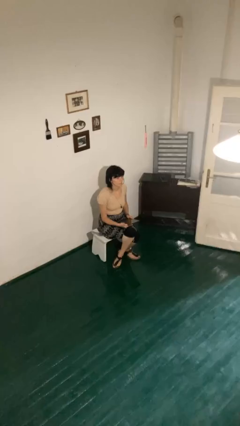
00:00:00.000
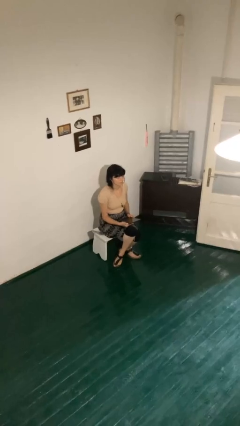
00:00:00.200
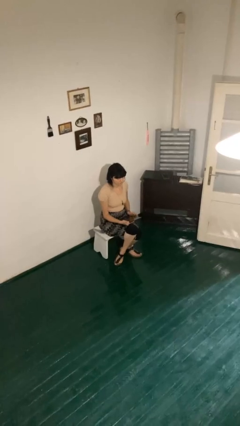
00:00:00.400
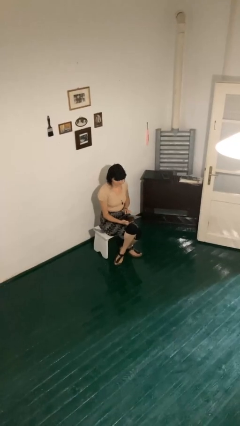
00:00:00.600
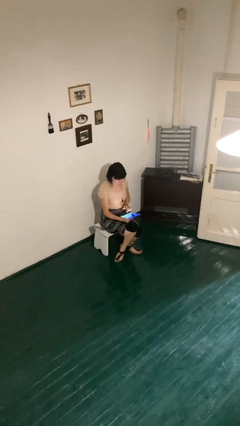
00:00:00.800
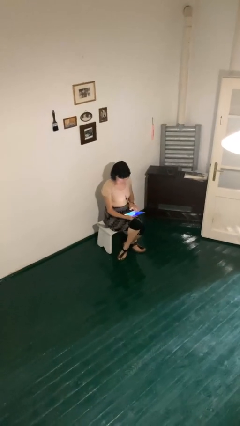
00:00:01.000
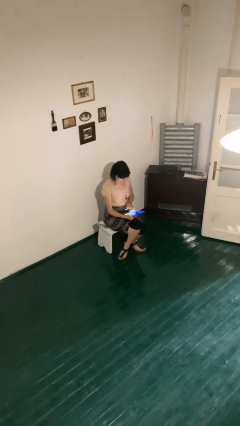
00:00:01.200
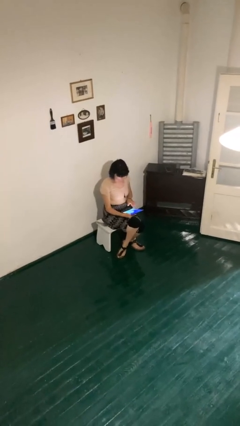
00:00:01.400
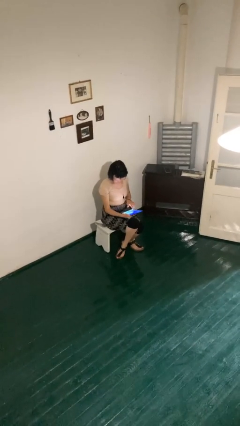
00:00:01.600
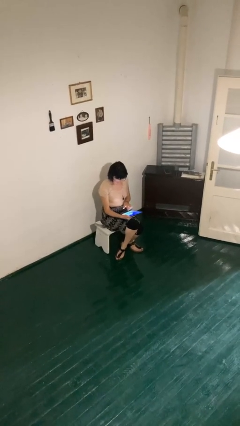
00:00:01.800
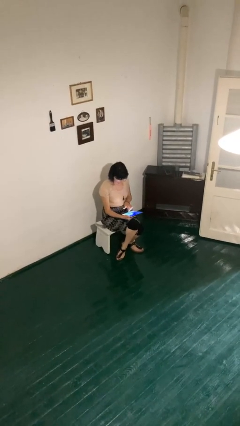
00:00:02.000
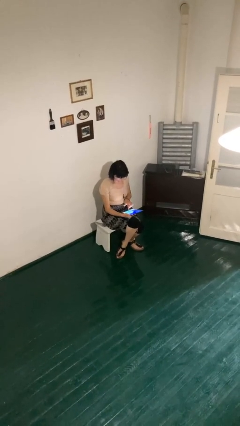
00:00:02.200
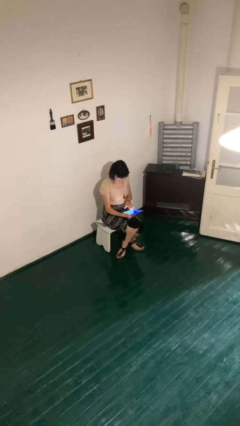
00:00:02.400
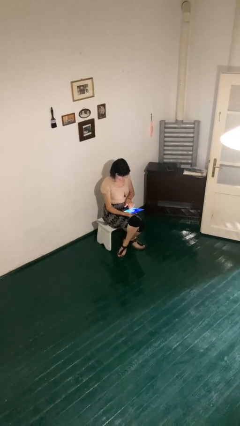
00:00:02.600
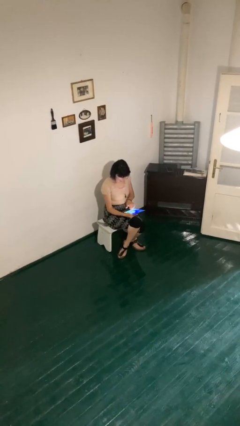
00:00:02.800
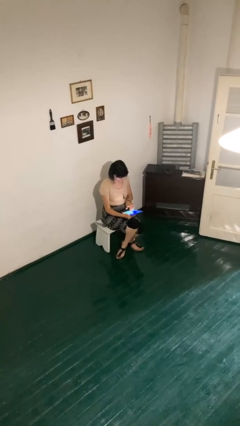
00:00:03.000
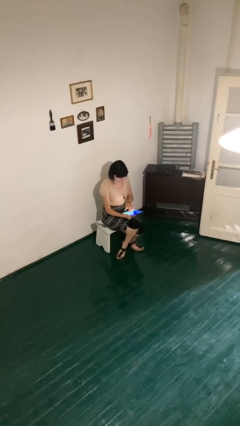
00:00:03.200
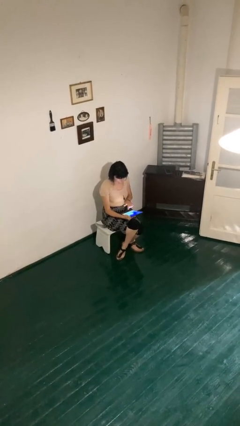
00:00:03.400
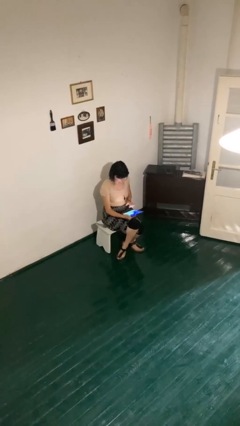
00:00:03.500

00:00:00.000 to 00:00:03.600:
person interacts with tablet

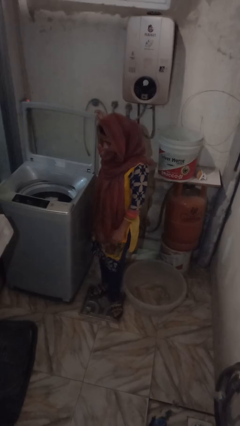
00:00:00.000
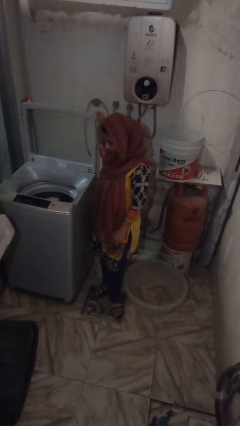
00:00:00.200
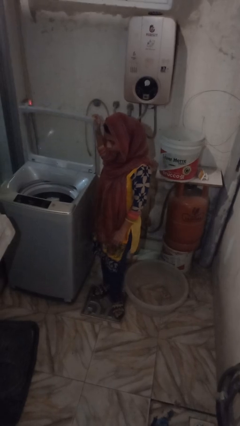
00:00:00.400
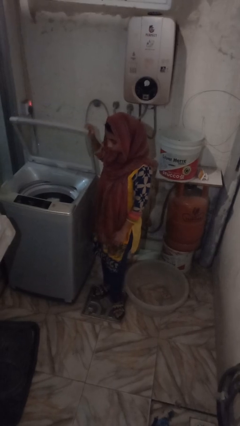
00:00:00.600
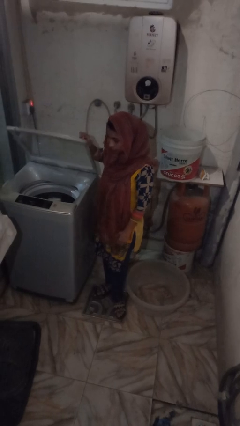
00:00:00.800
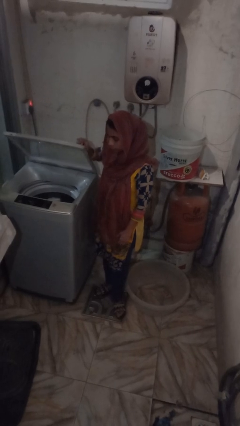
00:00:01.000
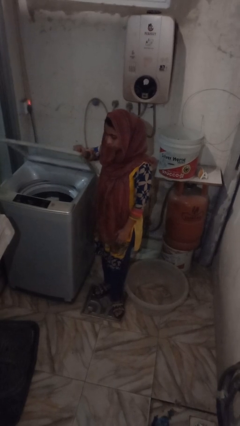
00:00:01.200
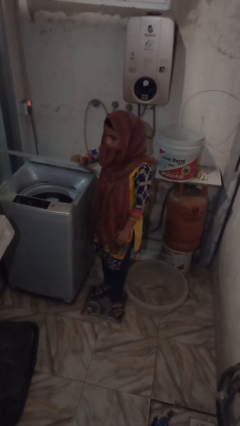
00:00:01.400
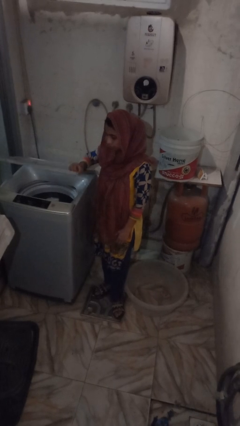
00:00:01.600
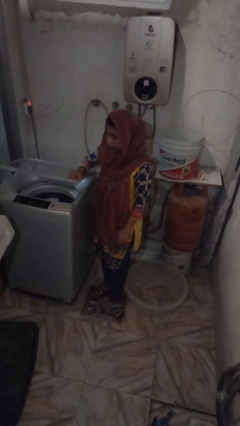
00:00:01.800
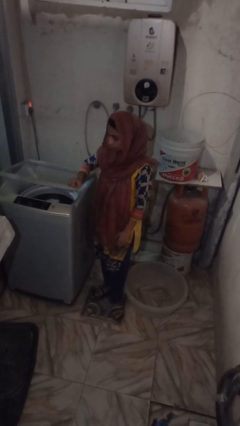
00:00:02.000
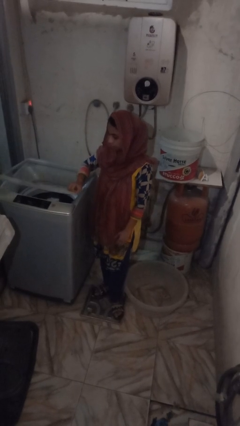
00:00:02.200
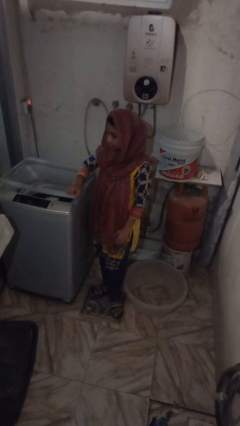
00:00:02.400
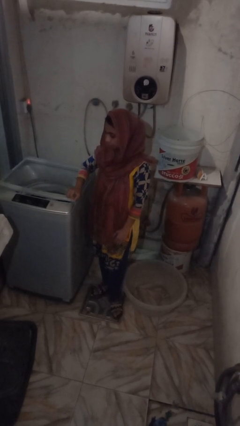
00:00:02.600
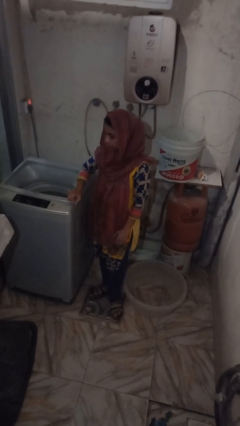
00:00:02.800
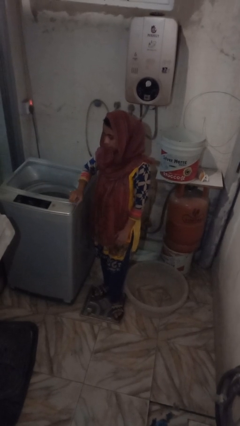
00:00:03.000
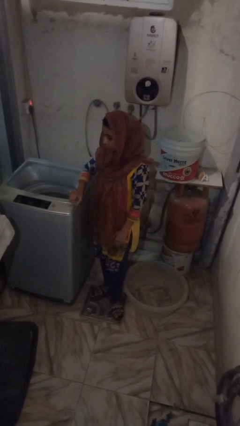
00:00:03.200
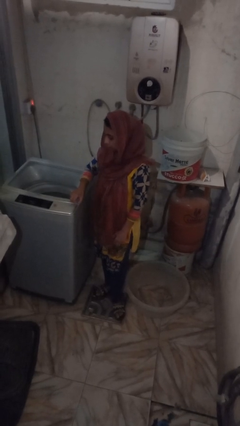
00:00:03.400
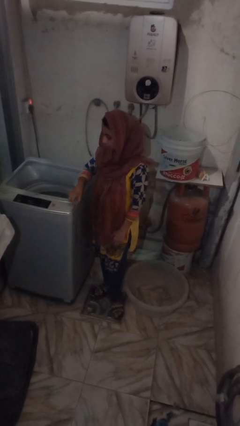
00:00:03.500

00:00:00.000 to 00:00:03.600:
person closes clothes washer

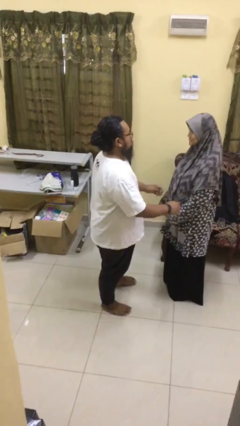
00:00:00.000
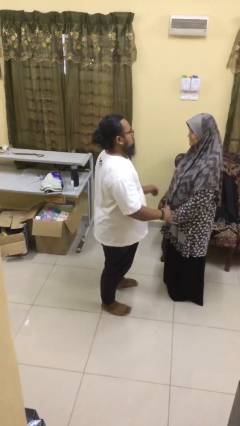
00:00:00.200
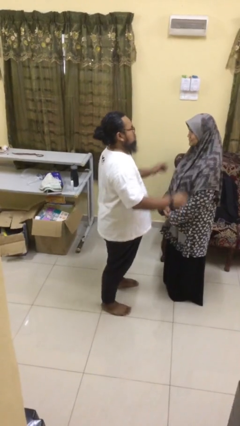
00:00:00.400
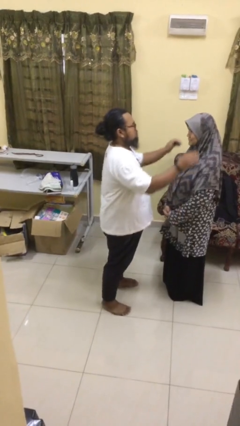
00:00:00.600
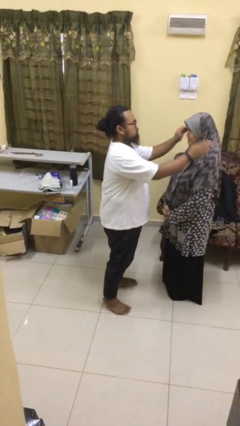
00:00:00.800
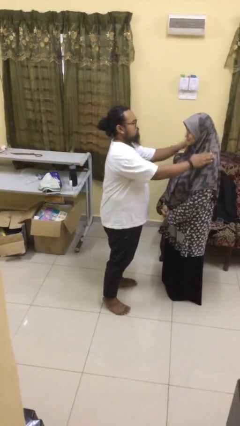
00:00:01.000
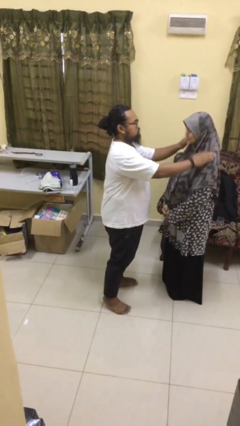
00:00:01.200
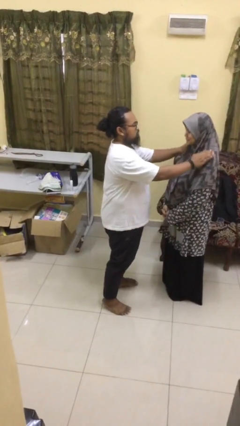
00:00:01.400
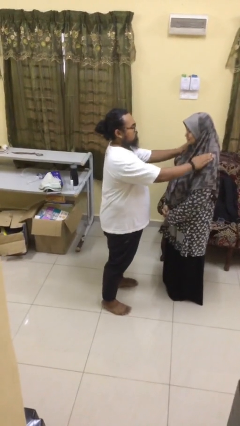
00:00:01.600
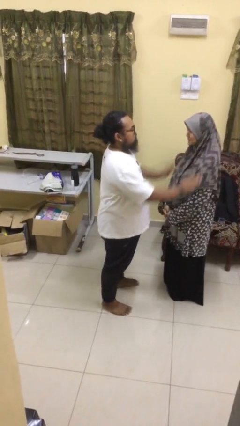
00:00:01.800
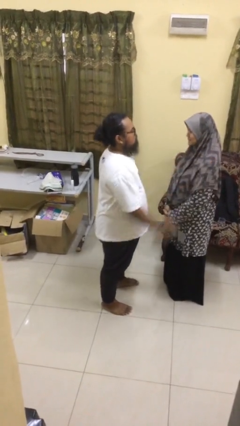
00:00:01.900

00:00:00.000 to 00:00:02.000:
person pounds shoulders of person

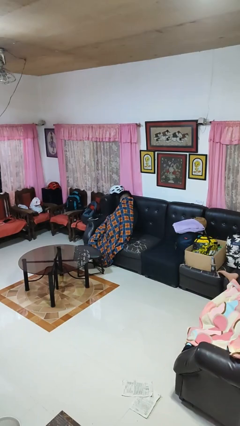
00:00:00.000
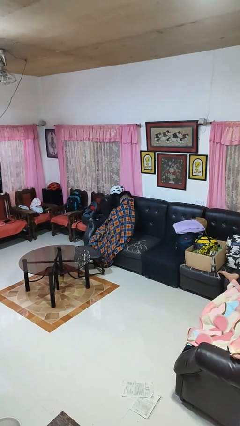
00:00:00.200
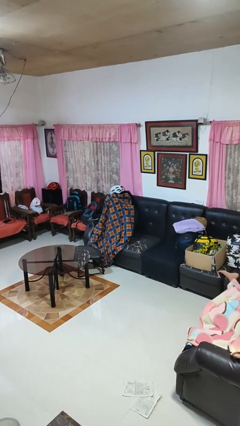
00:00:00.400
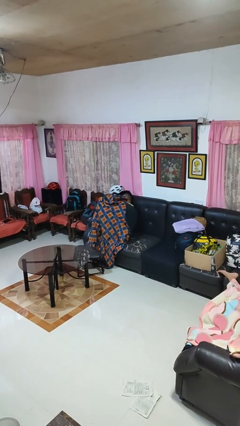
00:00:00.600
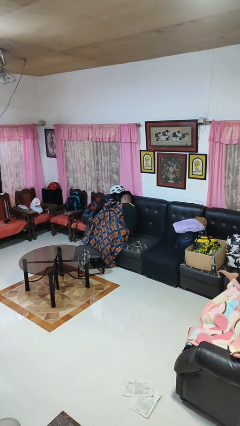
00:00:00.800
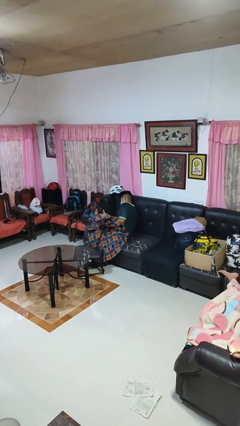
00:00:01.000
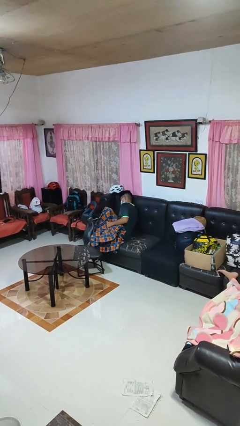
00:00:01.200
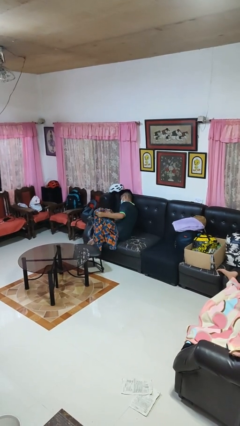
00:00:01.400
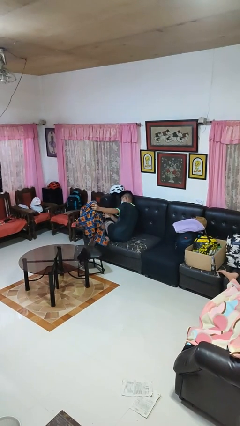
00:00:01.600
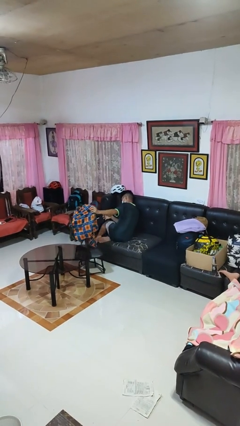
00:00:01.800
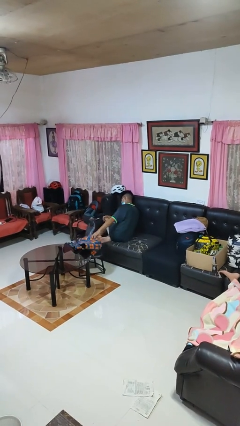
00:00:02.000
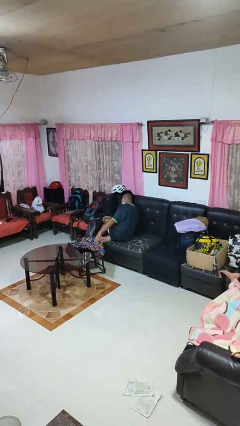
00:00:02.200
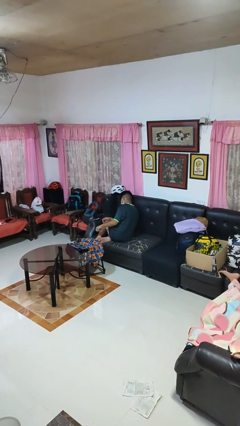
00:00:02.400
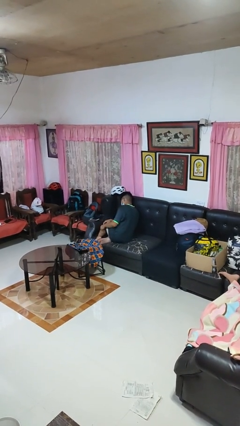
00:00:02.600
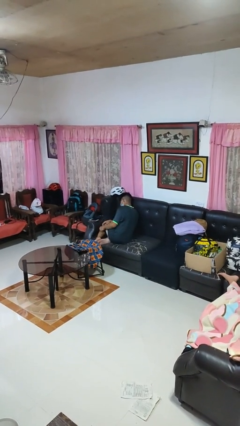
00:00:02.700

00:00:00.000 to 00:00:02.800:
person uncovers with blanket

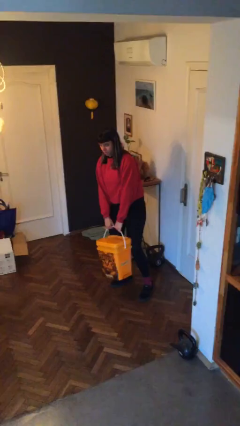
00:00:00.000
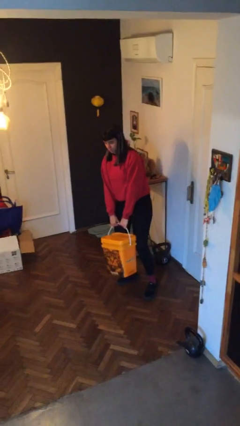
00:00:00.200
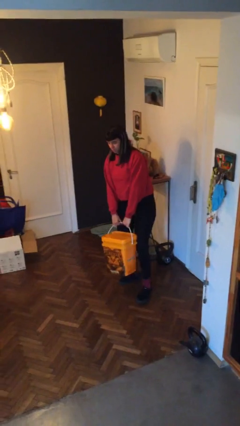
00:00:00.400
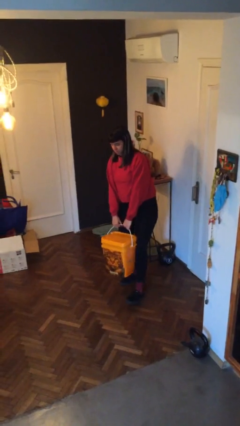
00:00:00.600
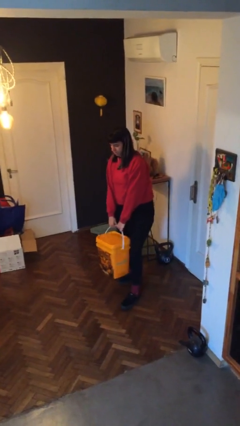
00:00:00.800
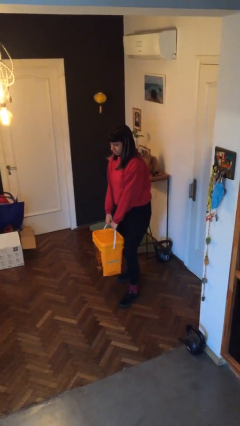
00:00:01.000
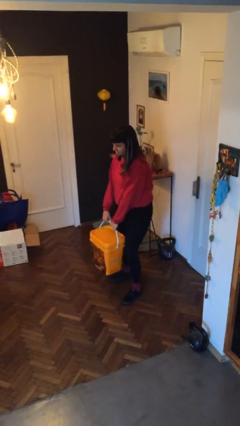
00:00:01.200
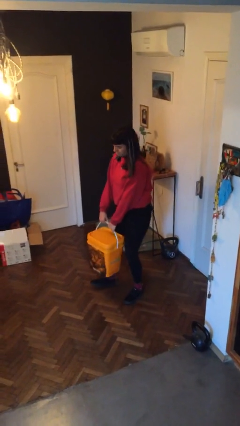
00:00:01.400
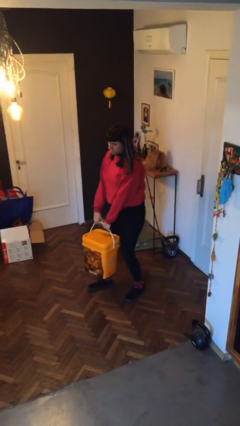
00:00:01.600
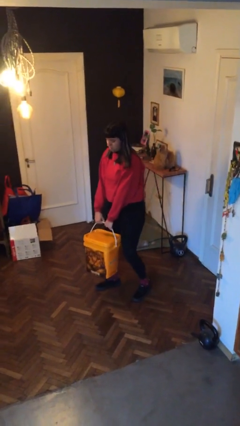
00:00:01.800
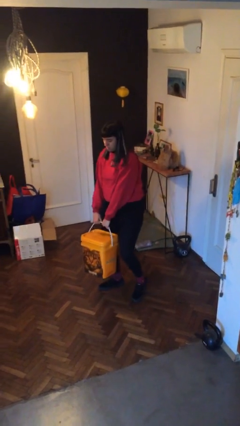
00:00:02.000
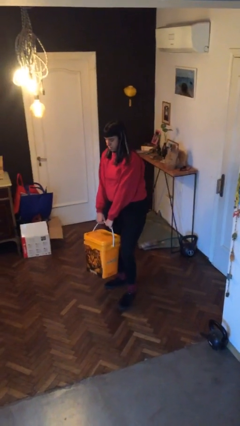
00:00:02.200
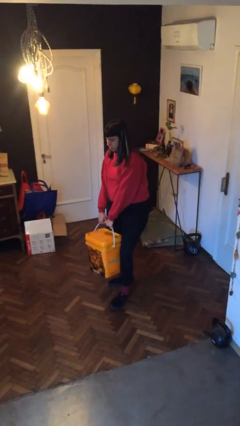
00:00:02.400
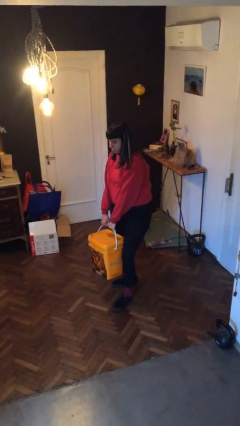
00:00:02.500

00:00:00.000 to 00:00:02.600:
person carries heavy object

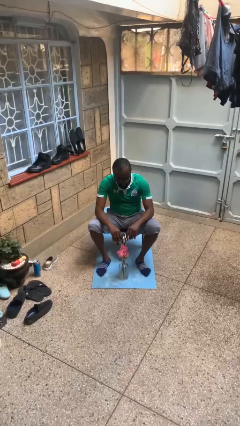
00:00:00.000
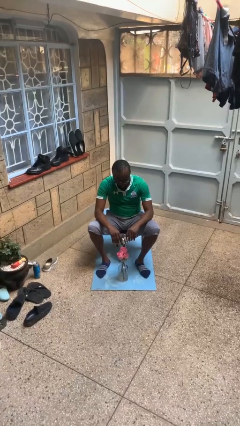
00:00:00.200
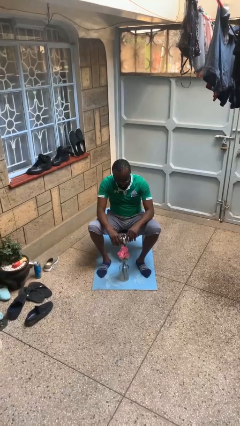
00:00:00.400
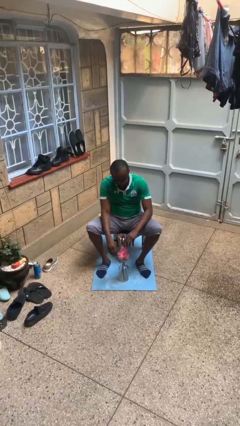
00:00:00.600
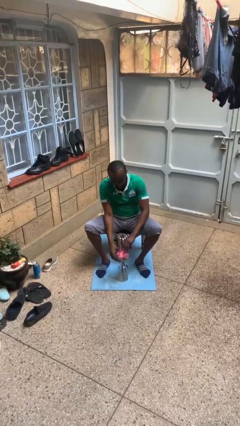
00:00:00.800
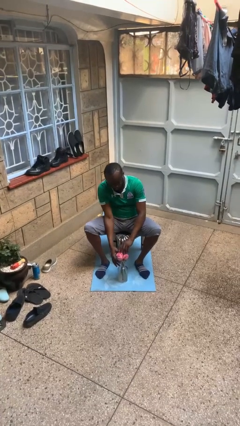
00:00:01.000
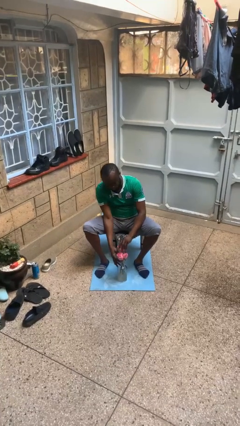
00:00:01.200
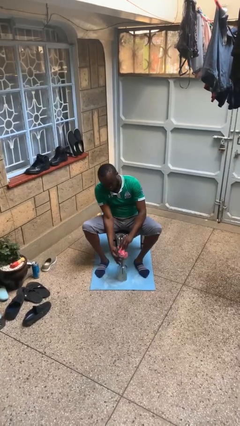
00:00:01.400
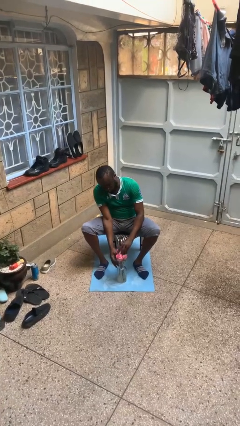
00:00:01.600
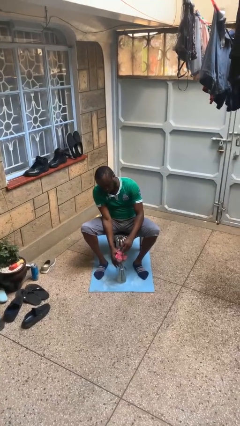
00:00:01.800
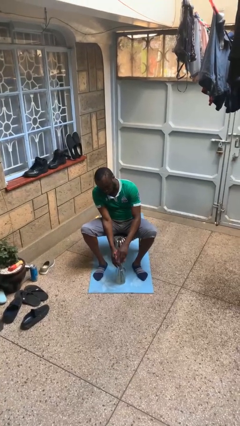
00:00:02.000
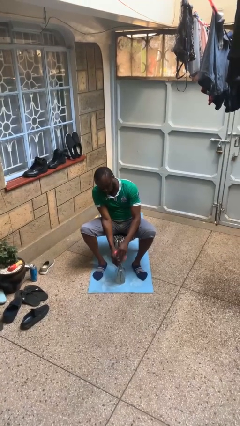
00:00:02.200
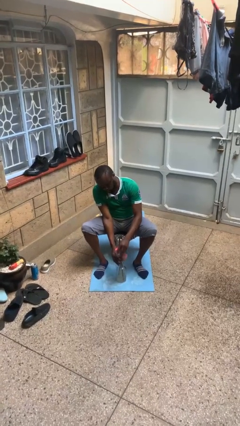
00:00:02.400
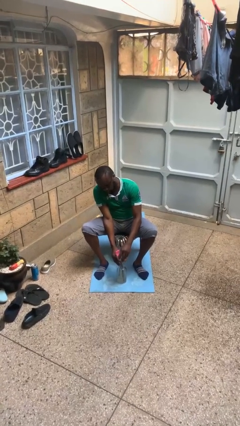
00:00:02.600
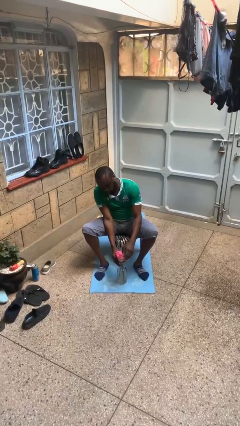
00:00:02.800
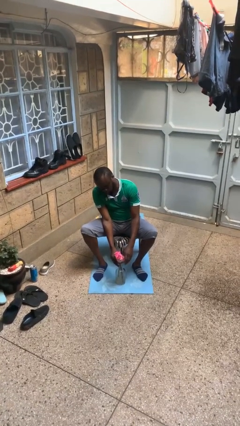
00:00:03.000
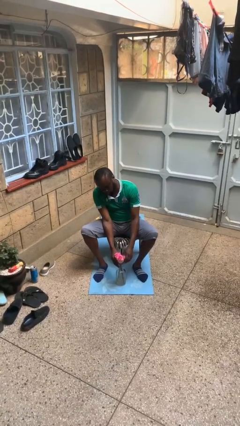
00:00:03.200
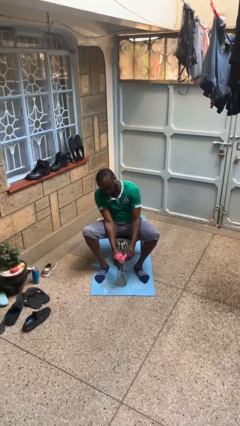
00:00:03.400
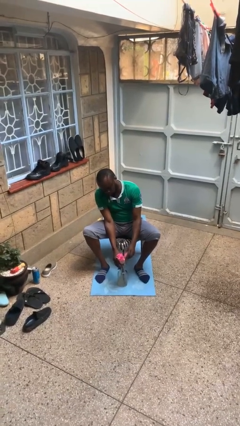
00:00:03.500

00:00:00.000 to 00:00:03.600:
person arranges flowers in vase
